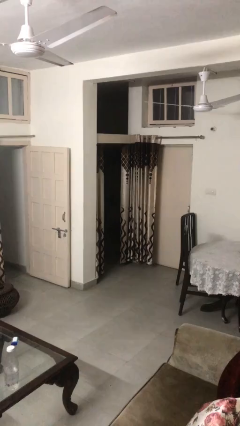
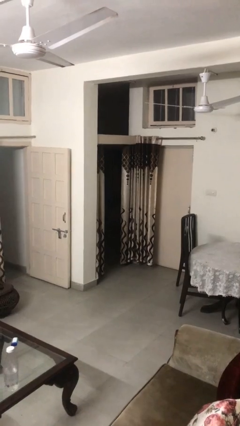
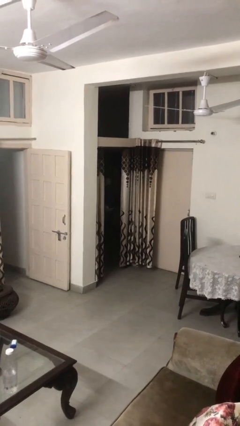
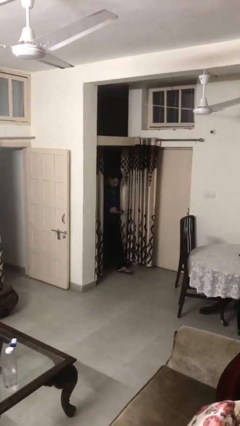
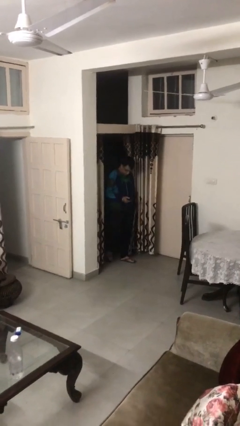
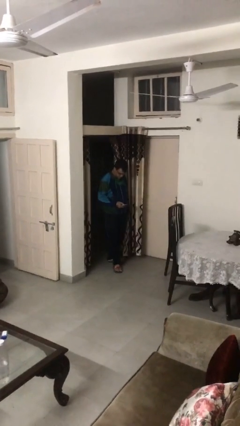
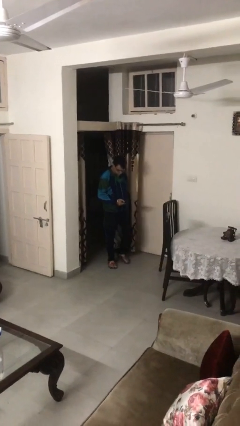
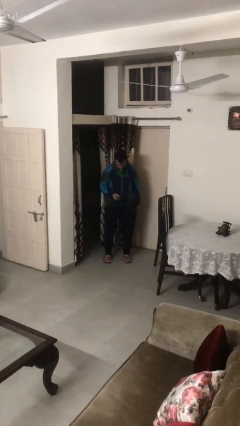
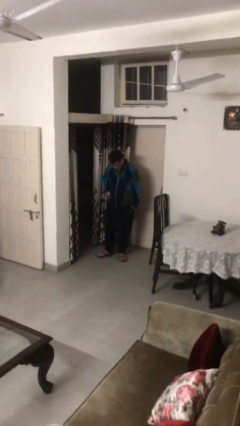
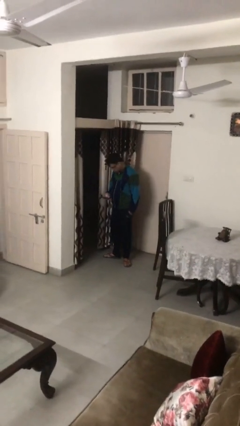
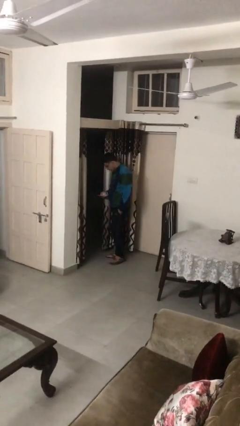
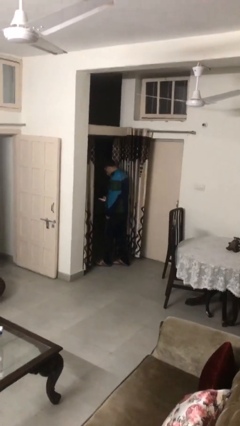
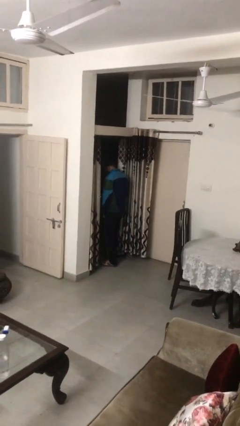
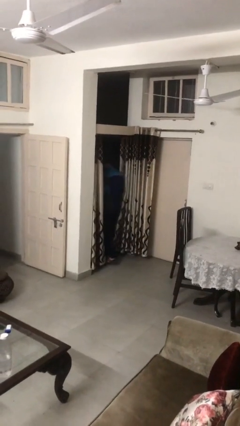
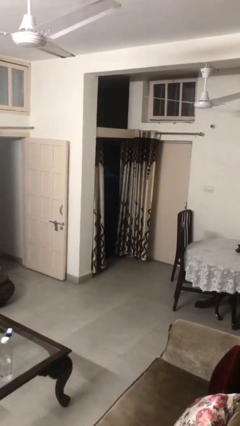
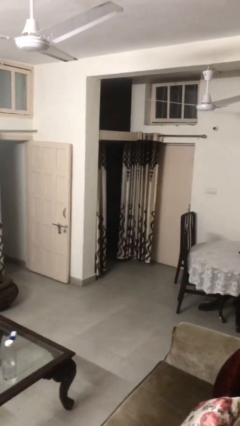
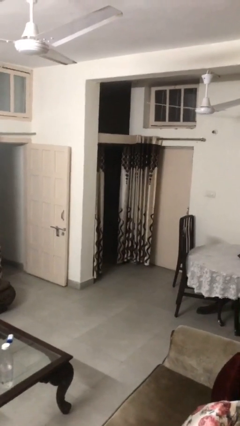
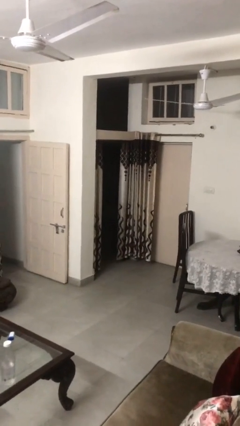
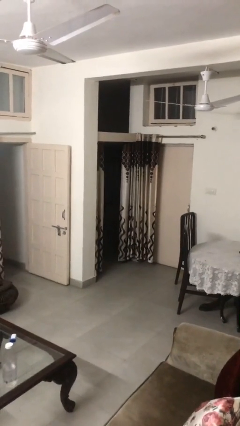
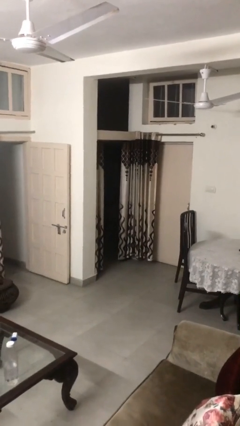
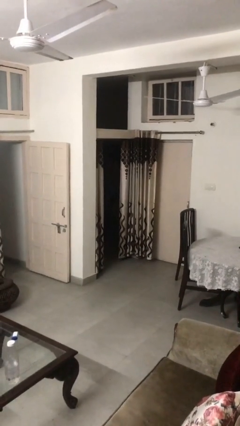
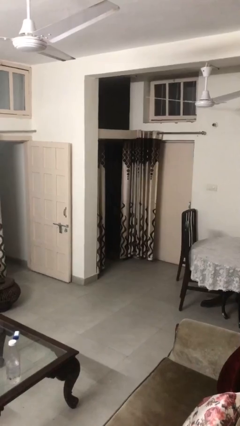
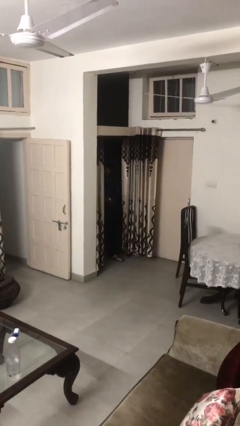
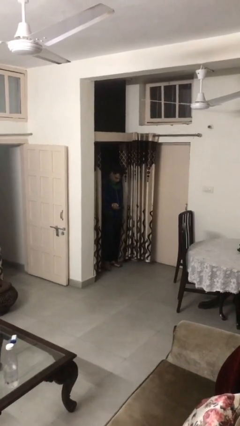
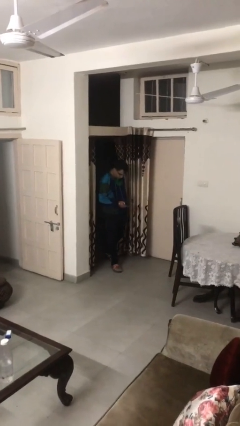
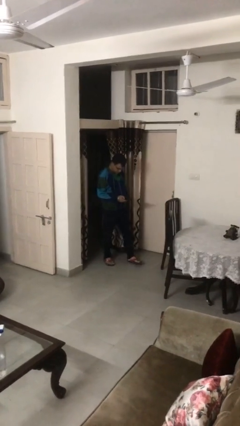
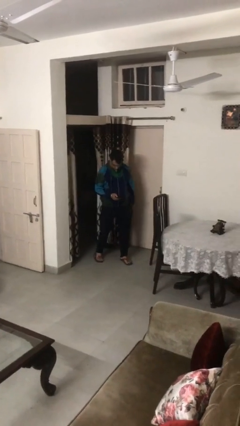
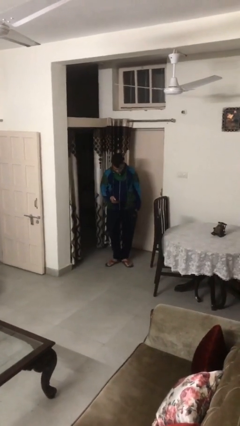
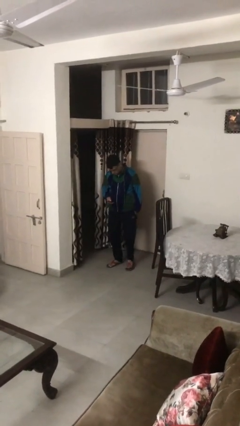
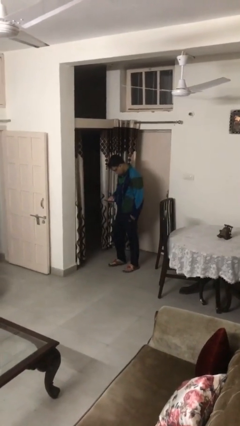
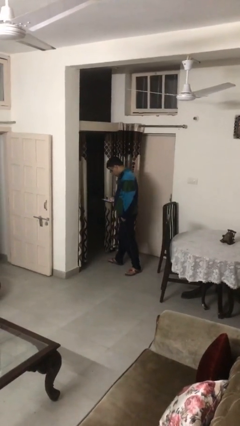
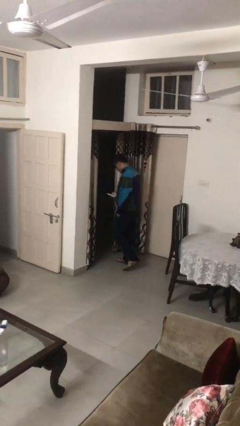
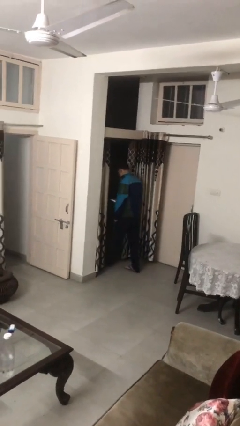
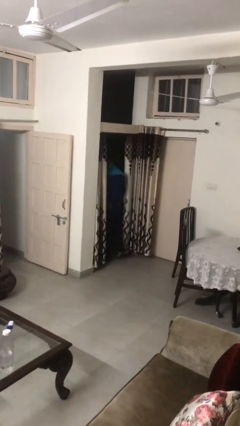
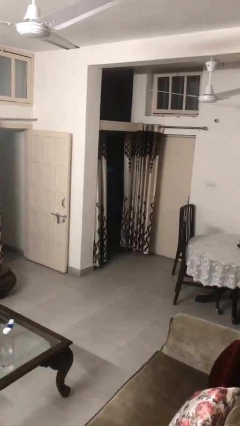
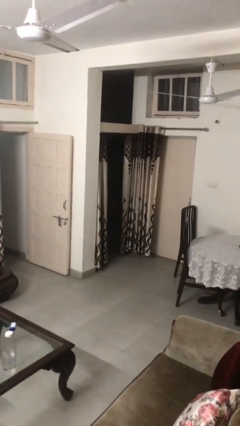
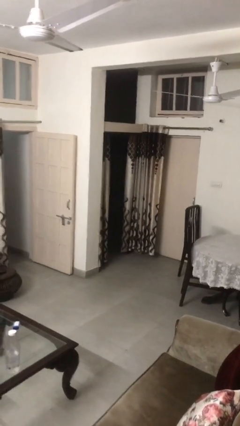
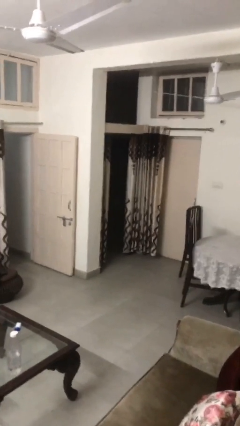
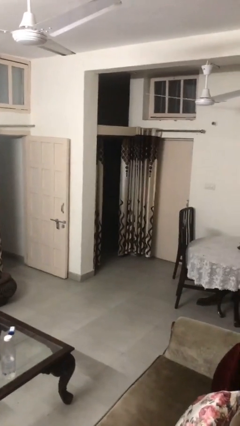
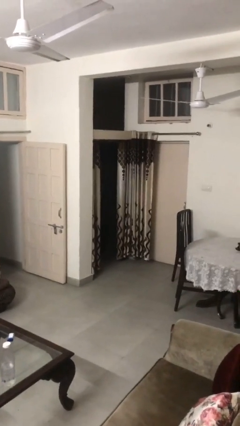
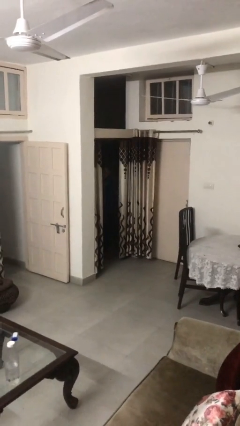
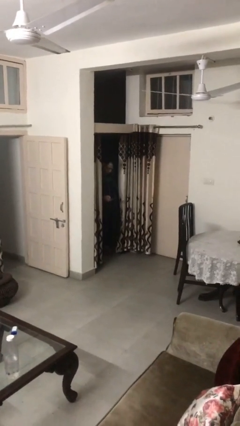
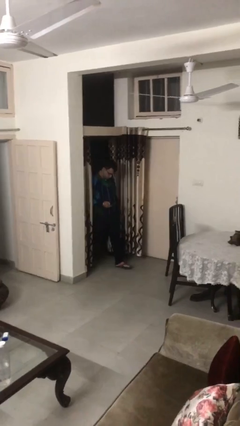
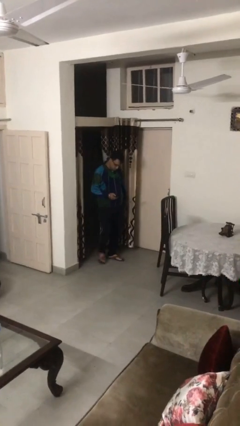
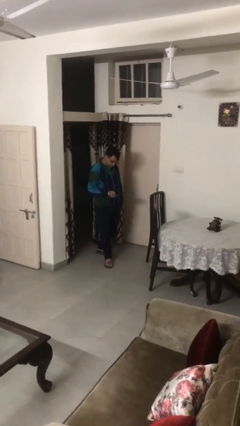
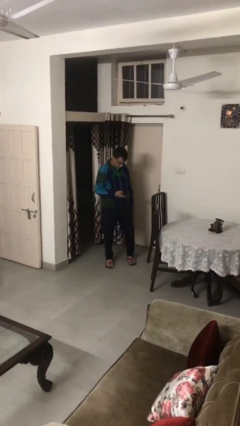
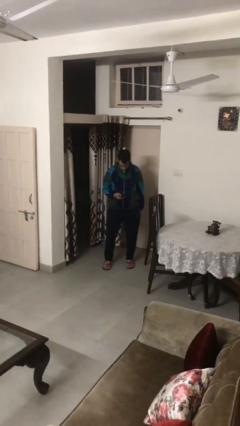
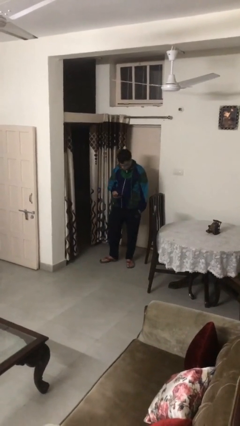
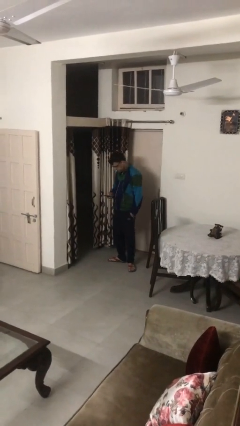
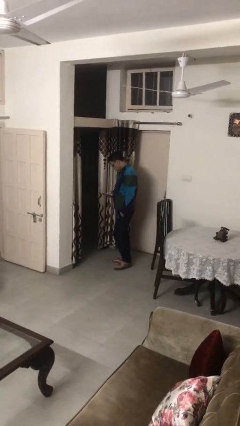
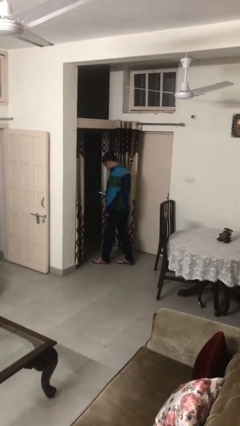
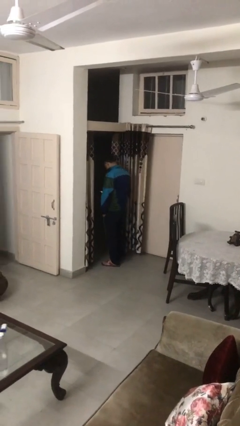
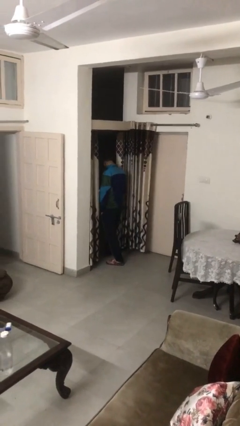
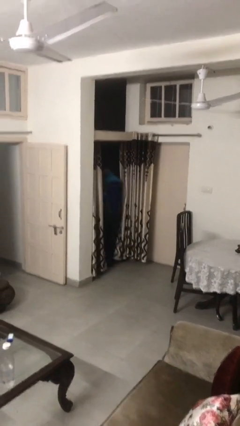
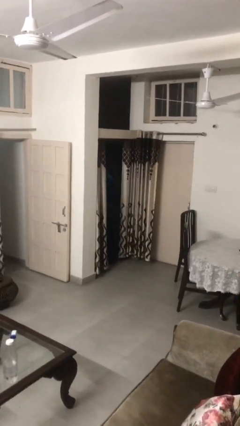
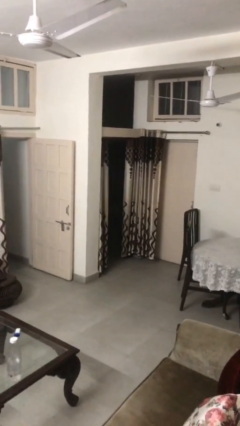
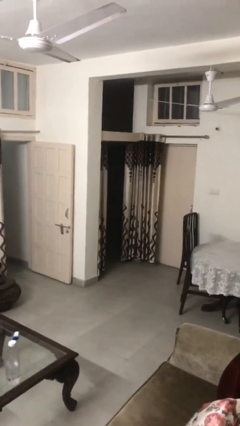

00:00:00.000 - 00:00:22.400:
person texts on phone

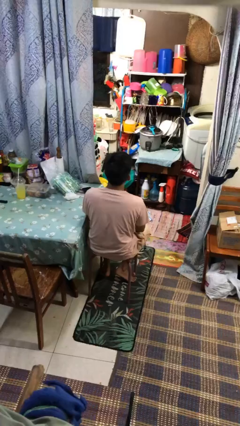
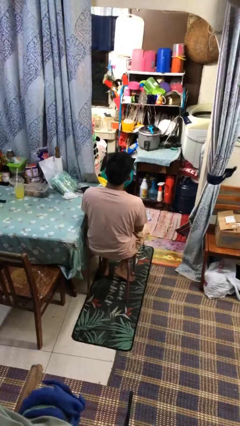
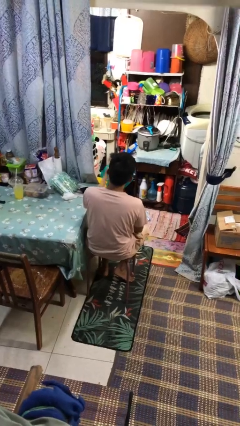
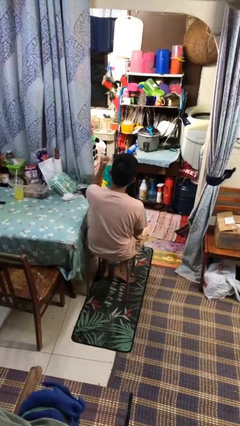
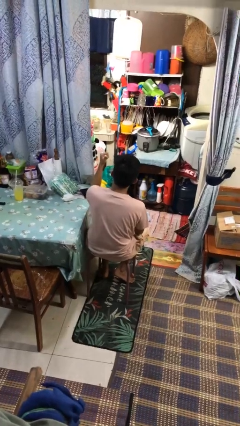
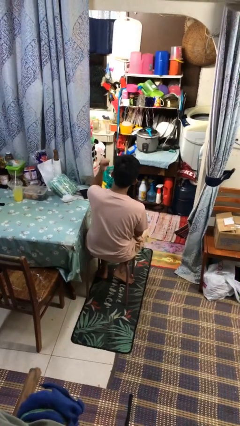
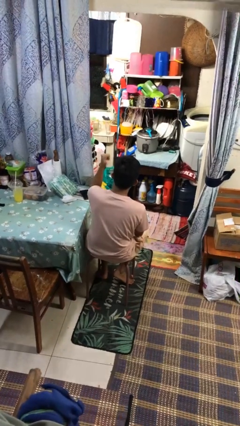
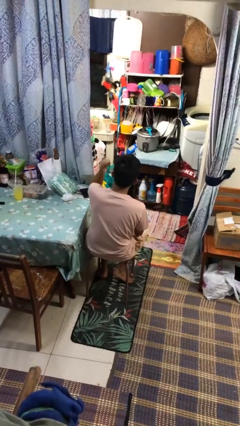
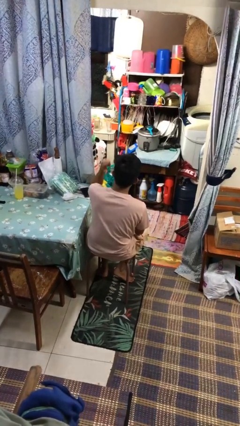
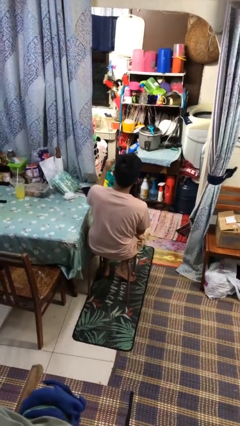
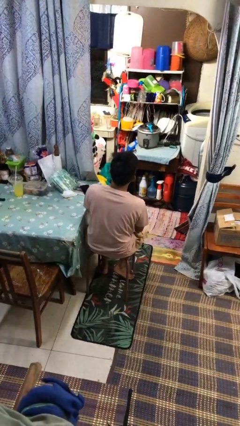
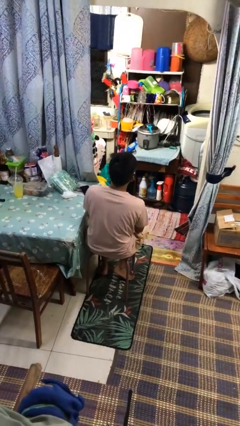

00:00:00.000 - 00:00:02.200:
person gestures behind me

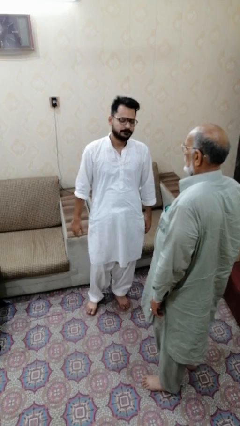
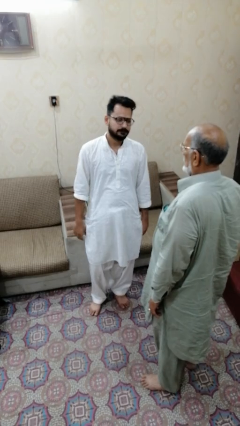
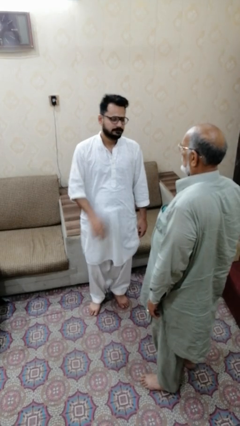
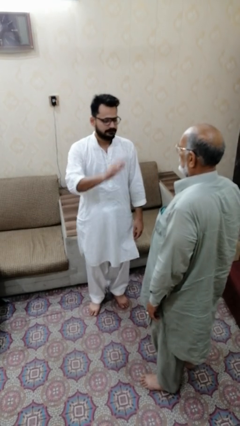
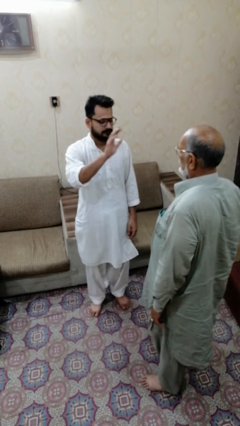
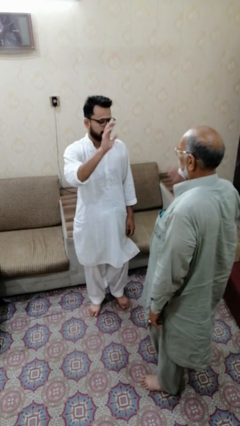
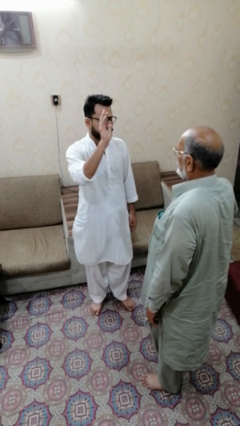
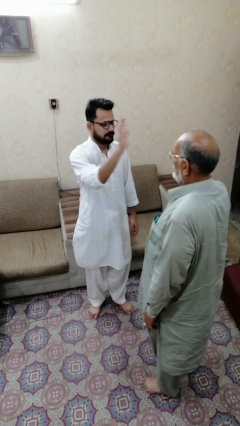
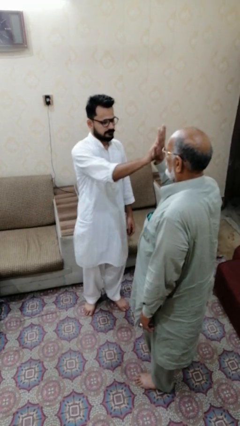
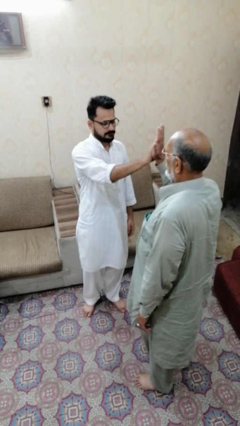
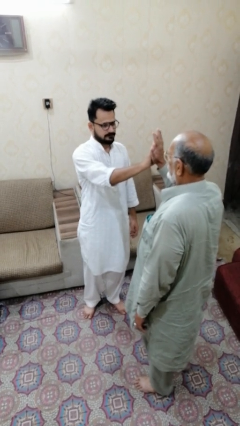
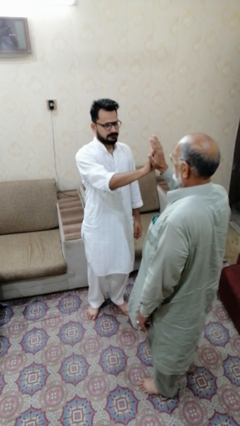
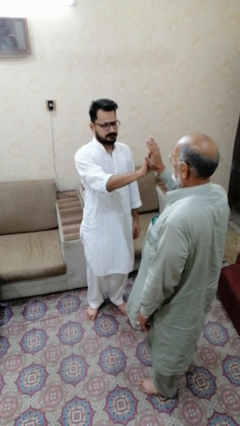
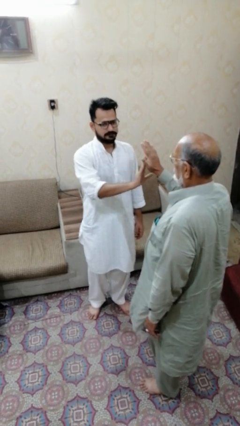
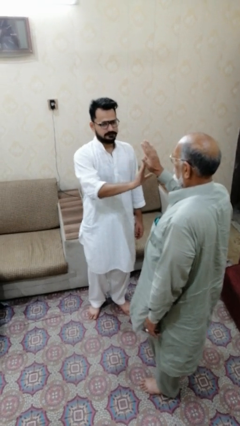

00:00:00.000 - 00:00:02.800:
person highfives hand

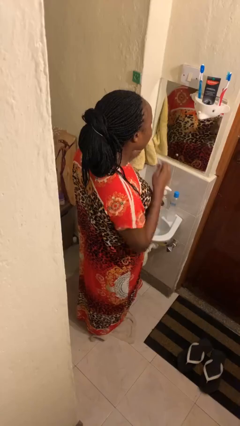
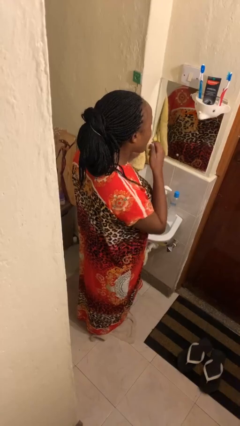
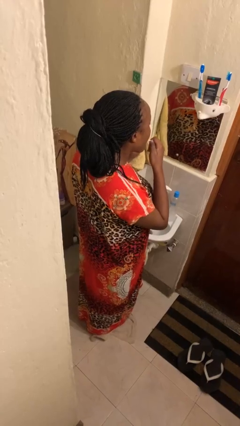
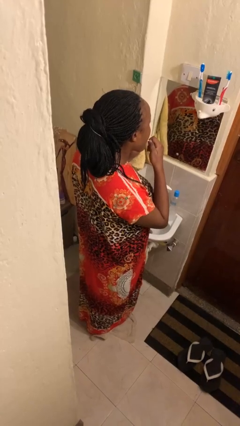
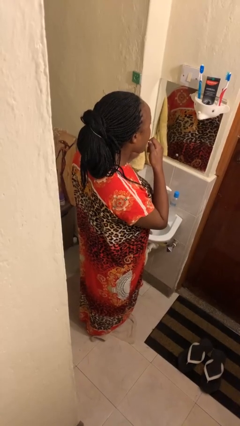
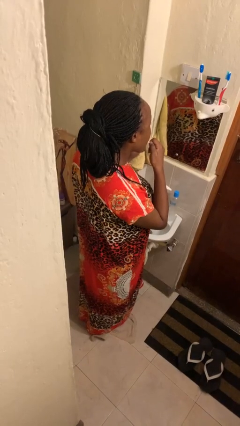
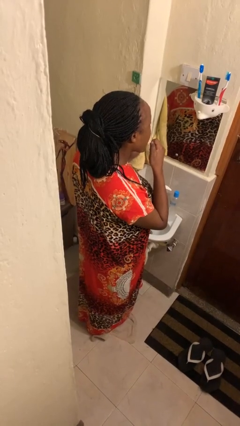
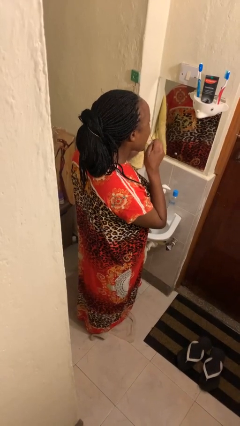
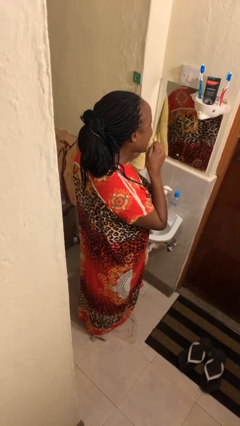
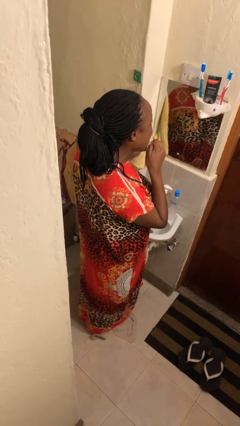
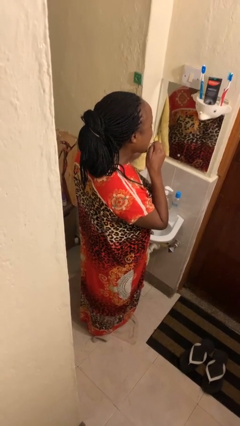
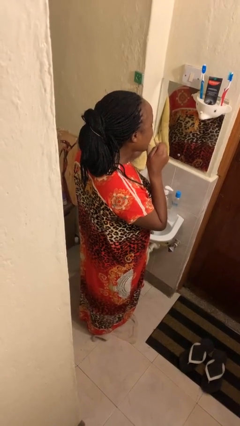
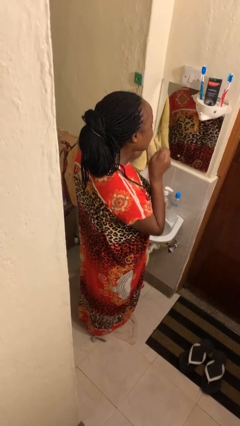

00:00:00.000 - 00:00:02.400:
person flosses
